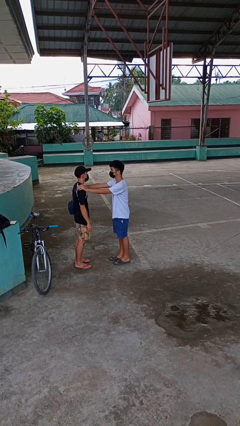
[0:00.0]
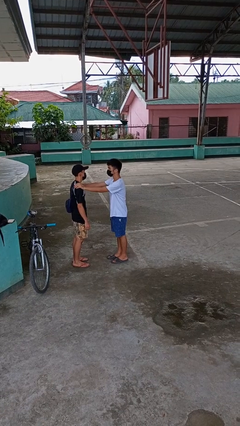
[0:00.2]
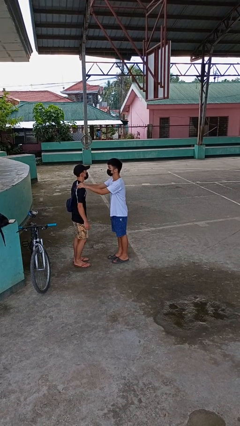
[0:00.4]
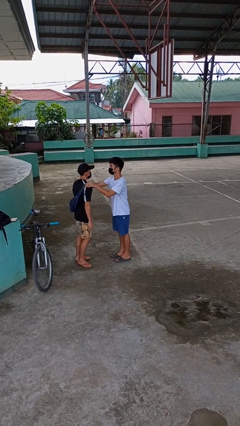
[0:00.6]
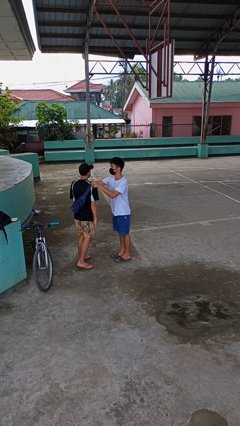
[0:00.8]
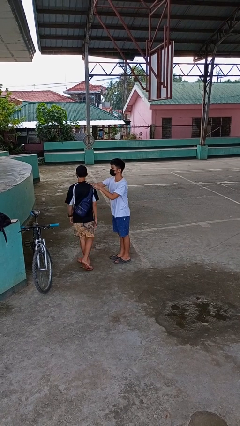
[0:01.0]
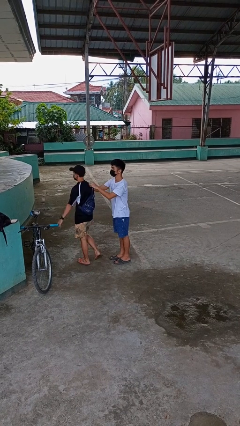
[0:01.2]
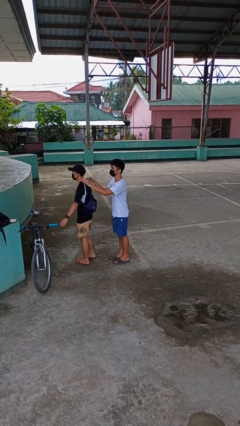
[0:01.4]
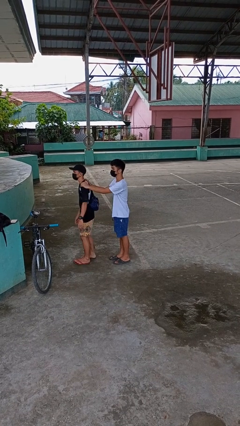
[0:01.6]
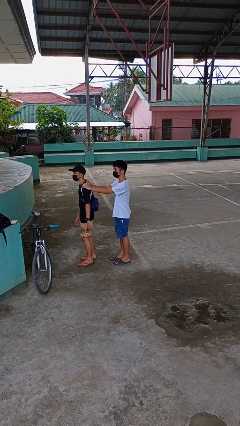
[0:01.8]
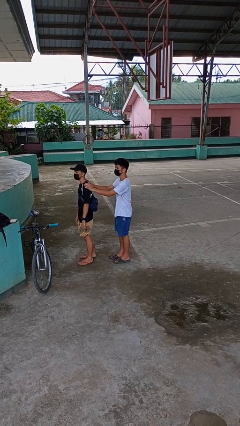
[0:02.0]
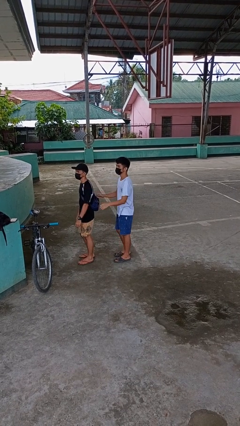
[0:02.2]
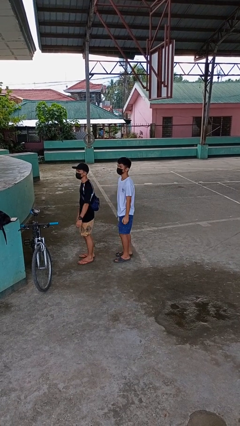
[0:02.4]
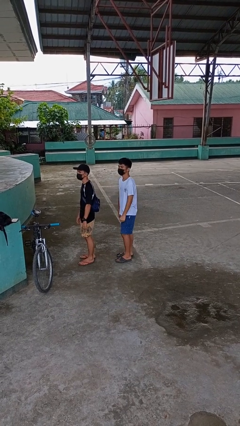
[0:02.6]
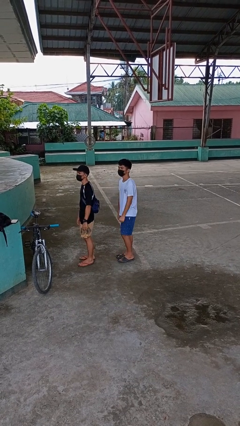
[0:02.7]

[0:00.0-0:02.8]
person spins person around

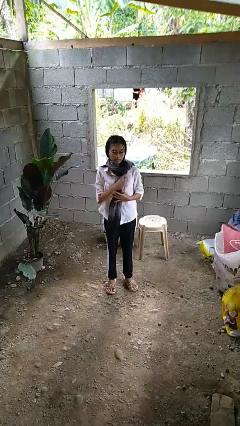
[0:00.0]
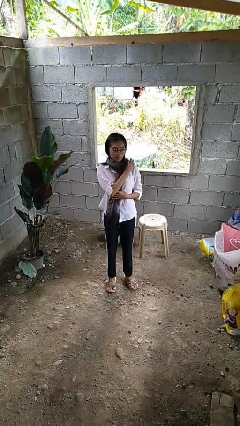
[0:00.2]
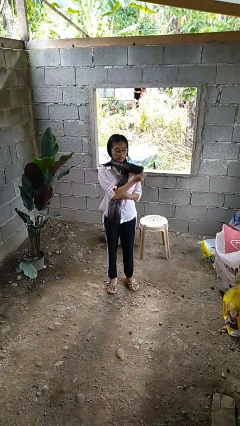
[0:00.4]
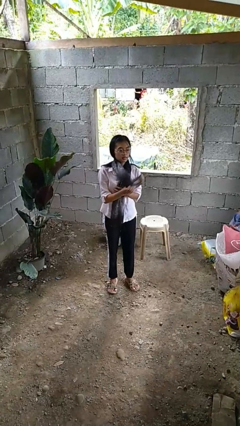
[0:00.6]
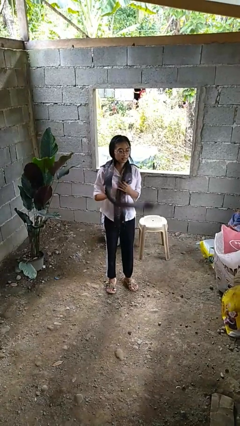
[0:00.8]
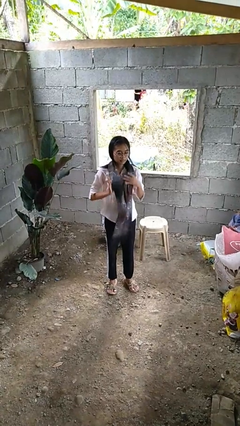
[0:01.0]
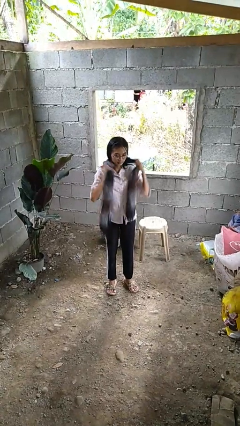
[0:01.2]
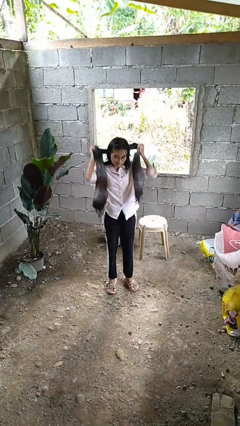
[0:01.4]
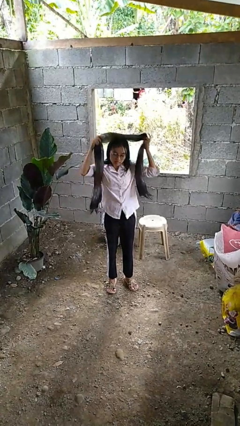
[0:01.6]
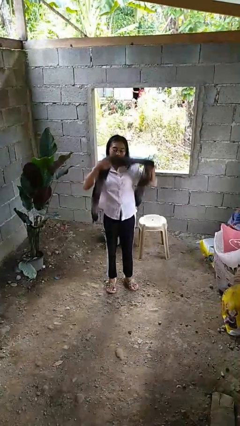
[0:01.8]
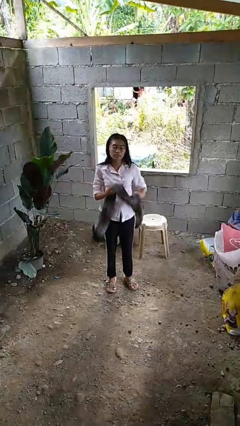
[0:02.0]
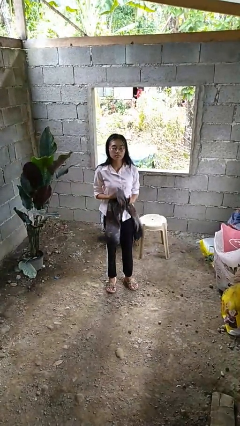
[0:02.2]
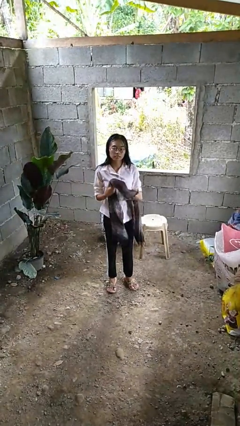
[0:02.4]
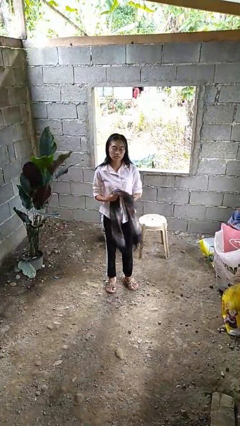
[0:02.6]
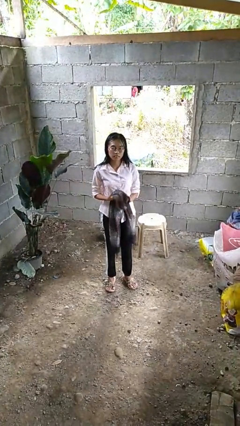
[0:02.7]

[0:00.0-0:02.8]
person takes off scarf

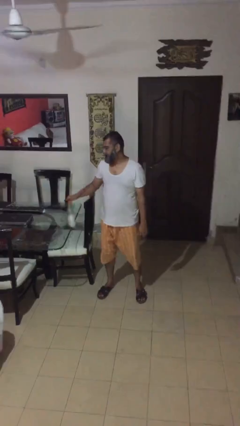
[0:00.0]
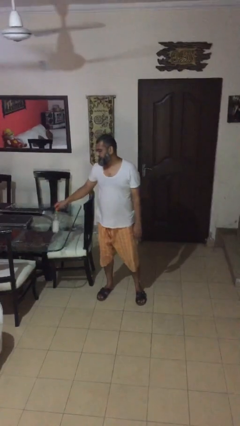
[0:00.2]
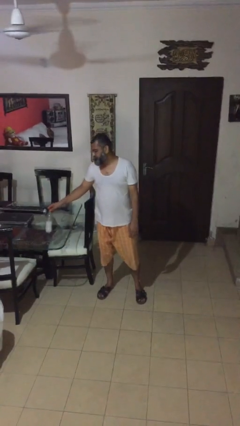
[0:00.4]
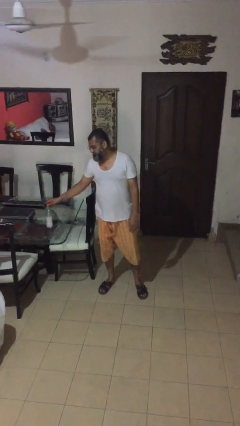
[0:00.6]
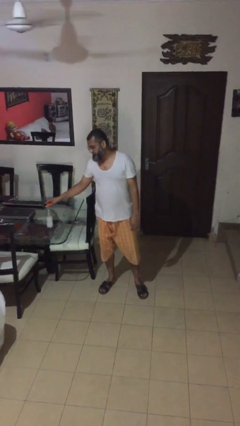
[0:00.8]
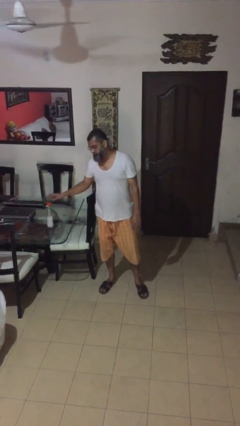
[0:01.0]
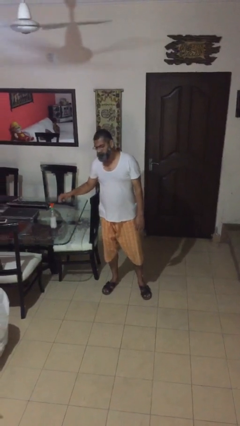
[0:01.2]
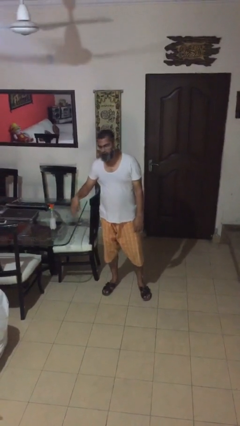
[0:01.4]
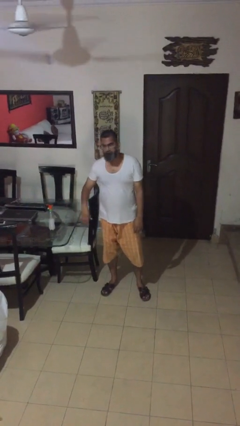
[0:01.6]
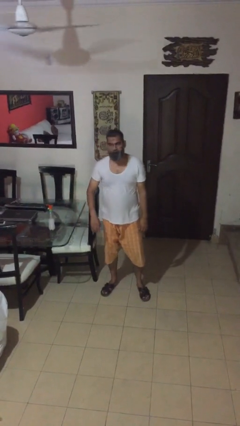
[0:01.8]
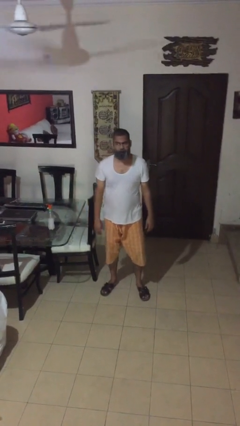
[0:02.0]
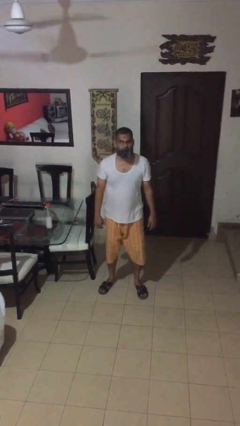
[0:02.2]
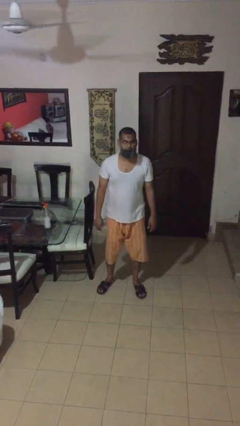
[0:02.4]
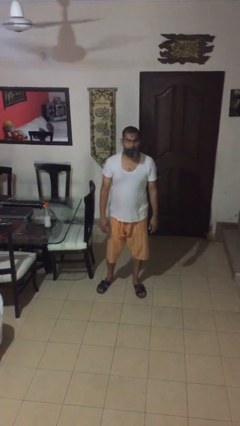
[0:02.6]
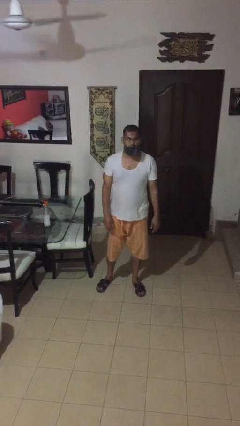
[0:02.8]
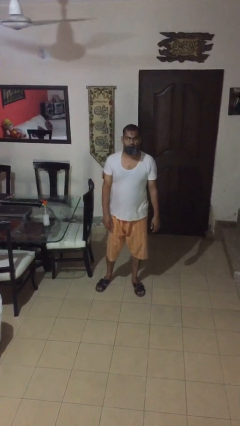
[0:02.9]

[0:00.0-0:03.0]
person puts down object on table

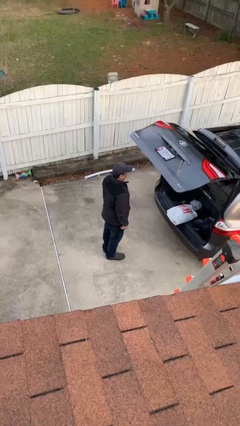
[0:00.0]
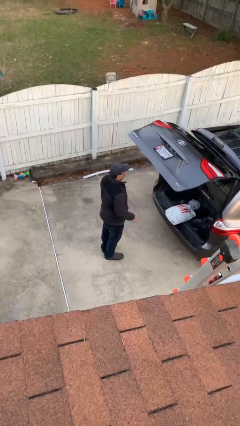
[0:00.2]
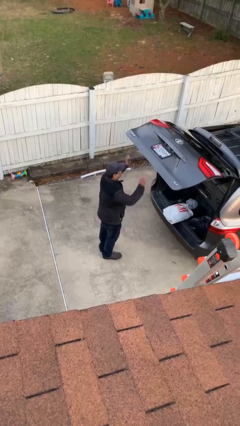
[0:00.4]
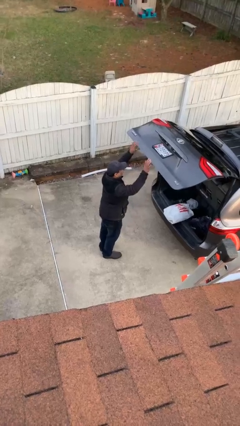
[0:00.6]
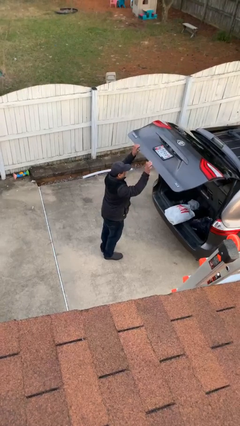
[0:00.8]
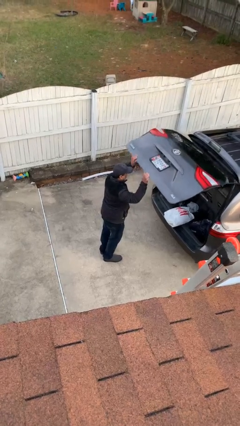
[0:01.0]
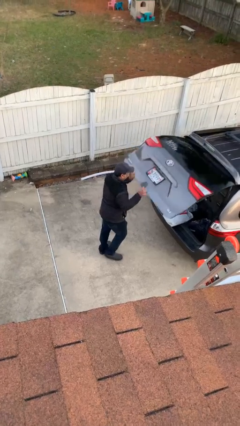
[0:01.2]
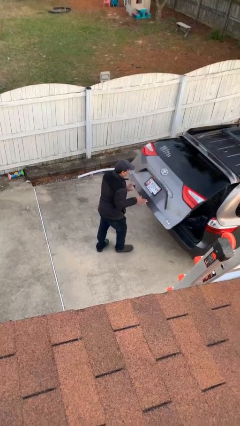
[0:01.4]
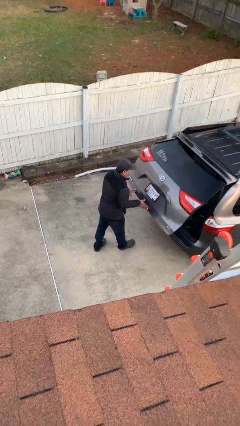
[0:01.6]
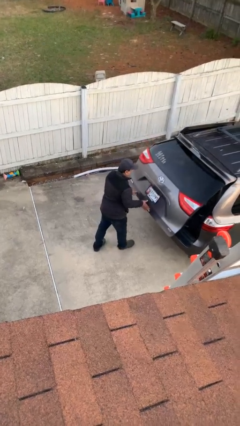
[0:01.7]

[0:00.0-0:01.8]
person closes car trunk

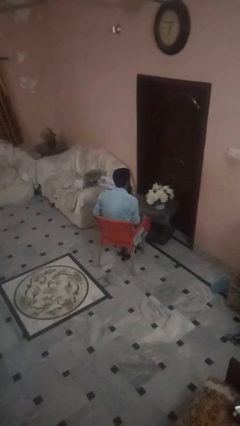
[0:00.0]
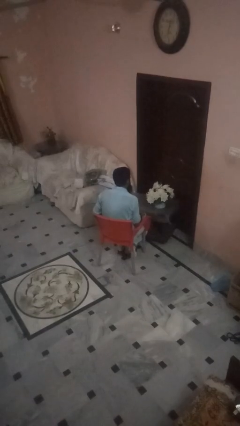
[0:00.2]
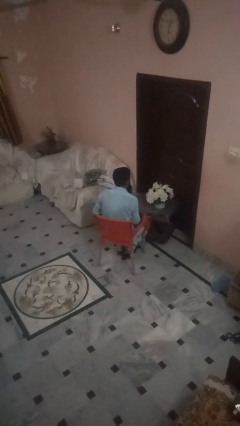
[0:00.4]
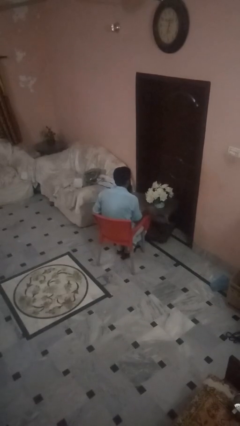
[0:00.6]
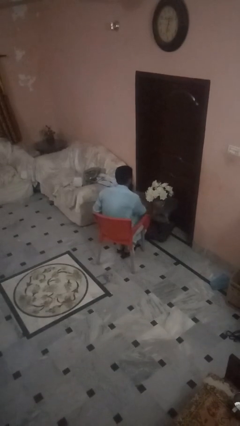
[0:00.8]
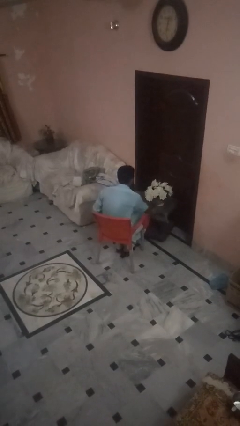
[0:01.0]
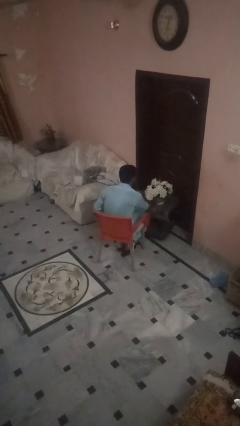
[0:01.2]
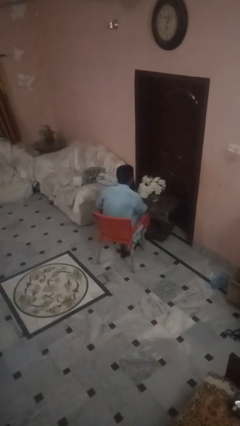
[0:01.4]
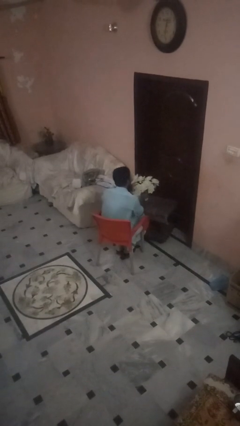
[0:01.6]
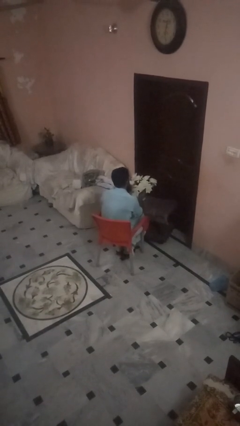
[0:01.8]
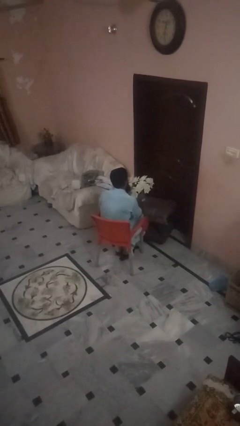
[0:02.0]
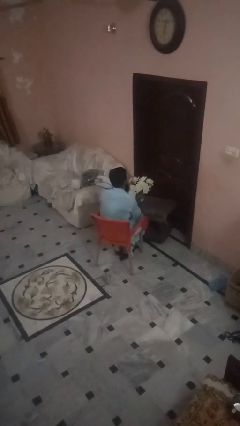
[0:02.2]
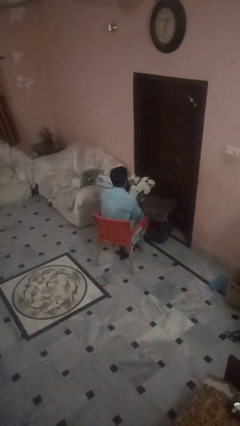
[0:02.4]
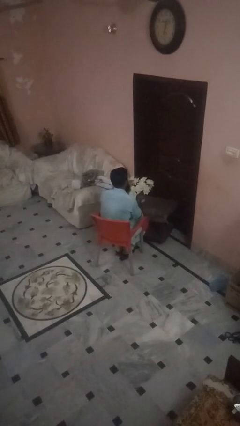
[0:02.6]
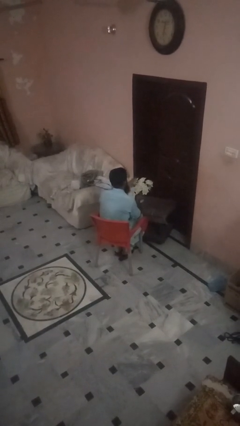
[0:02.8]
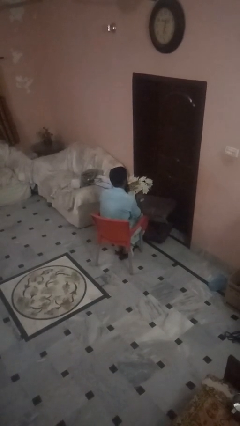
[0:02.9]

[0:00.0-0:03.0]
person arranges flowers in vase

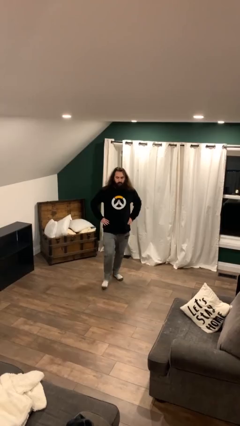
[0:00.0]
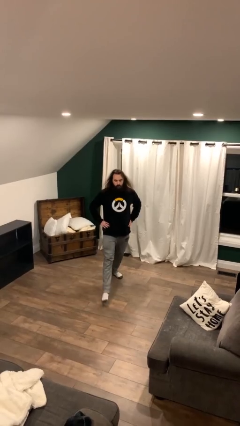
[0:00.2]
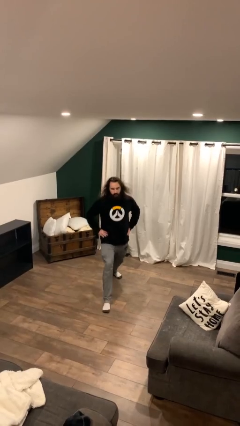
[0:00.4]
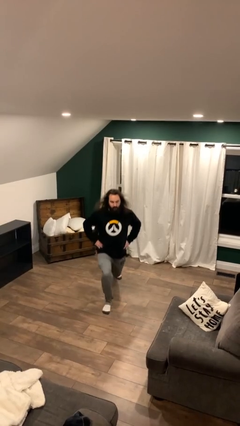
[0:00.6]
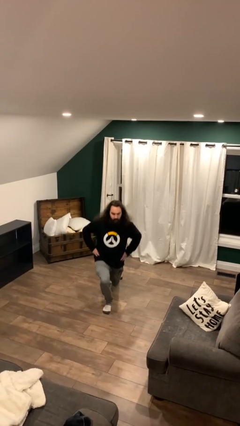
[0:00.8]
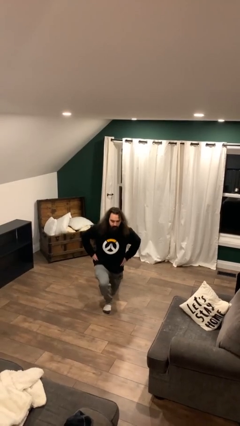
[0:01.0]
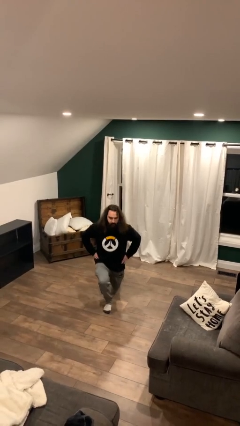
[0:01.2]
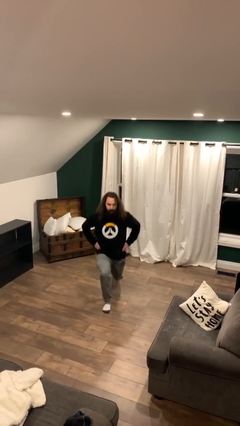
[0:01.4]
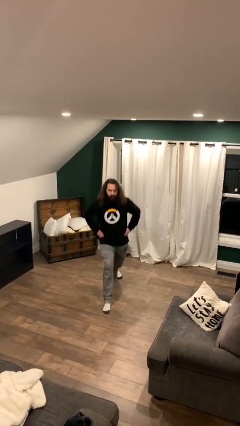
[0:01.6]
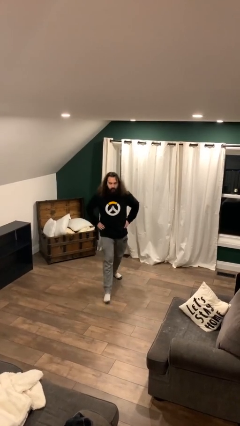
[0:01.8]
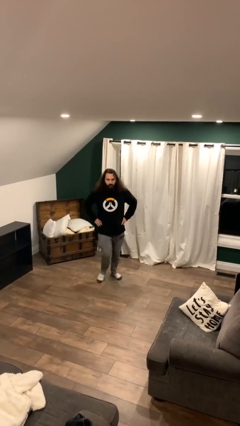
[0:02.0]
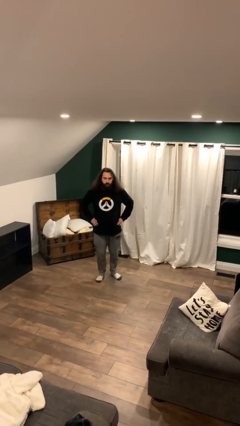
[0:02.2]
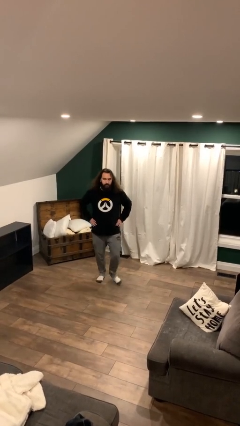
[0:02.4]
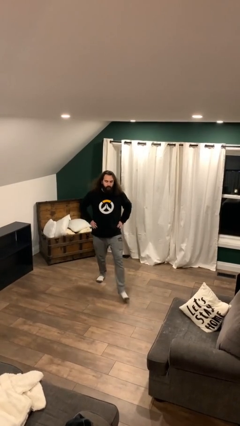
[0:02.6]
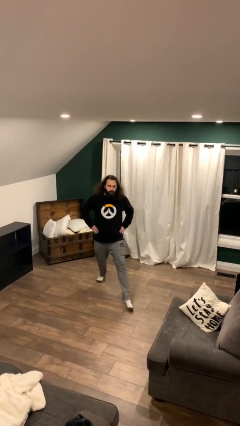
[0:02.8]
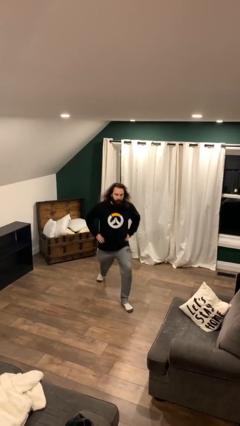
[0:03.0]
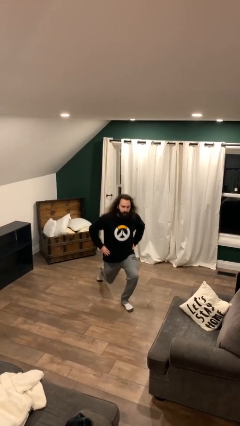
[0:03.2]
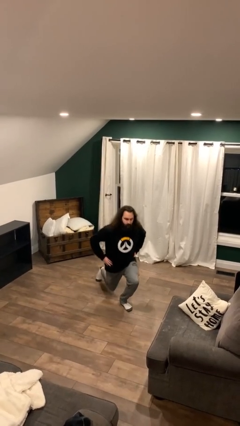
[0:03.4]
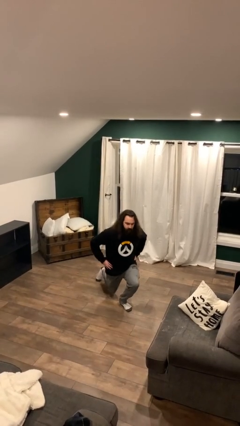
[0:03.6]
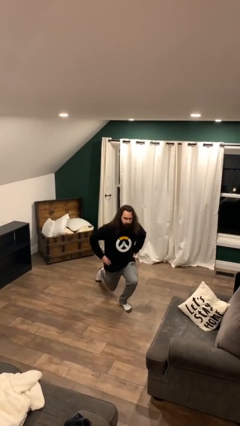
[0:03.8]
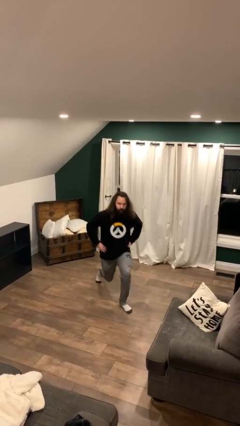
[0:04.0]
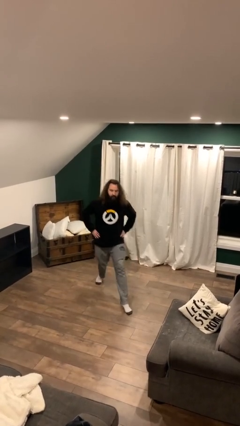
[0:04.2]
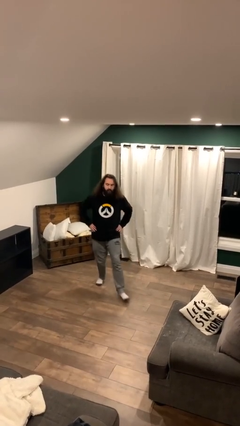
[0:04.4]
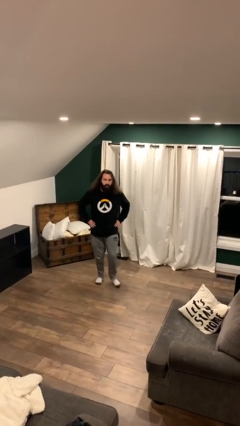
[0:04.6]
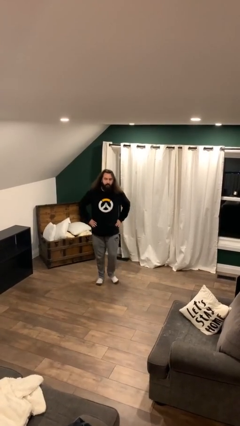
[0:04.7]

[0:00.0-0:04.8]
person exercises with lunges
